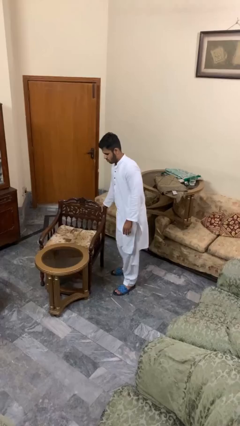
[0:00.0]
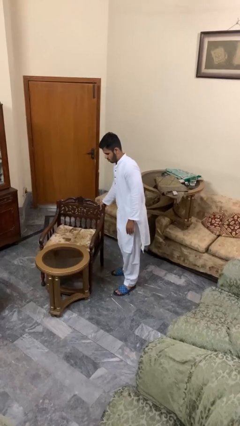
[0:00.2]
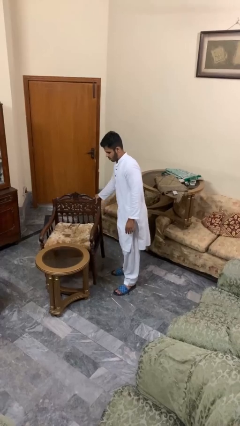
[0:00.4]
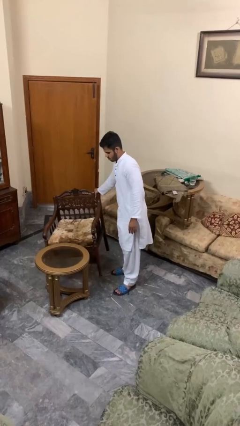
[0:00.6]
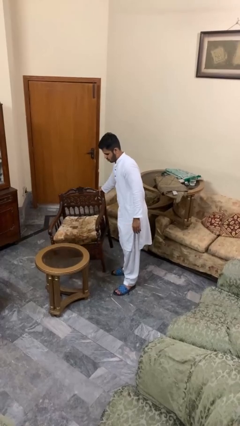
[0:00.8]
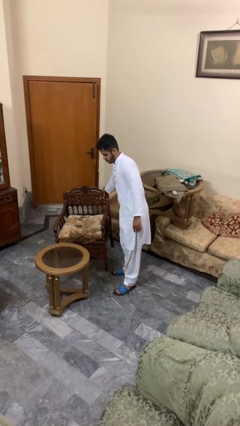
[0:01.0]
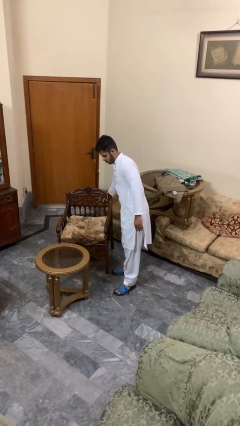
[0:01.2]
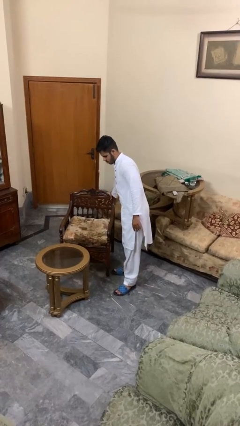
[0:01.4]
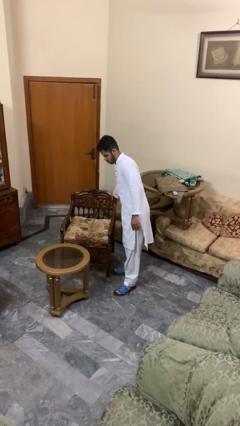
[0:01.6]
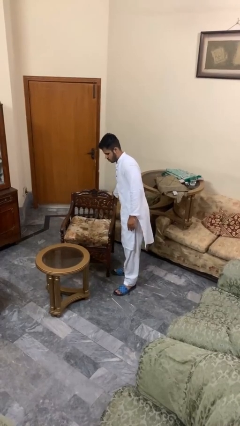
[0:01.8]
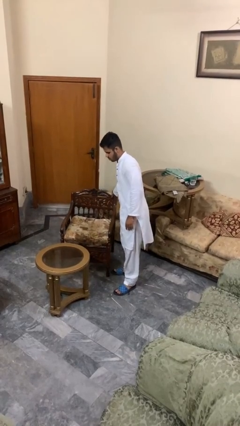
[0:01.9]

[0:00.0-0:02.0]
person pulls out chair

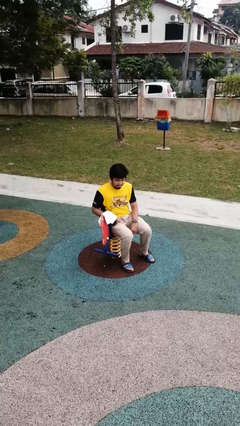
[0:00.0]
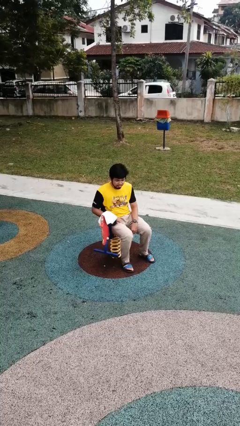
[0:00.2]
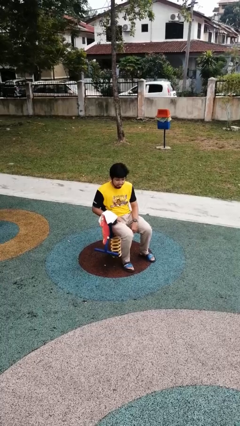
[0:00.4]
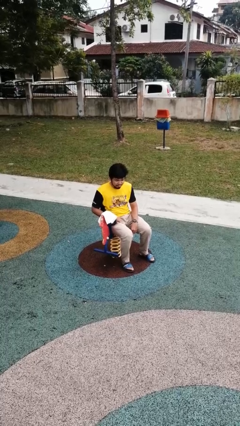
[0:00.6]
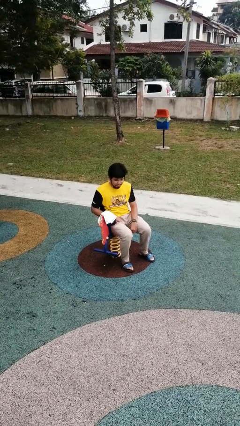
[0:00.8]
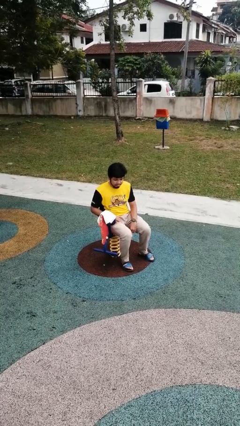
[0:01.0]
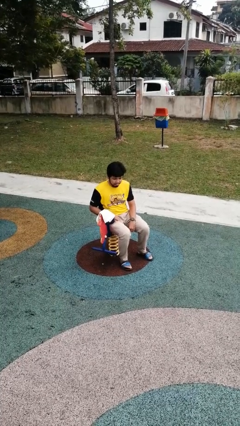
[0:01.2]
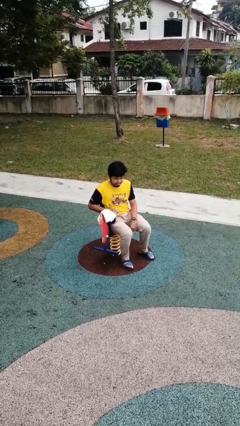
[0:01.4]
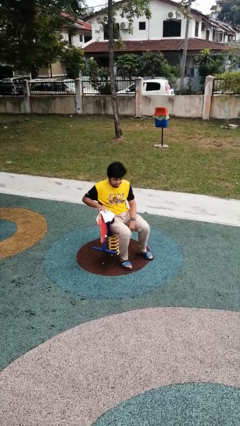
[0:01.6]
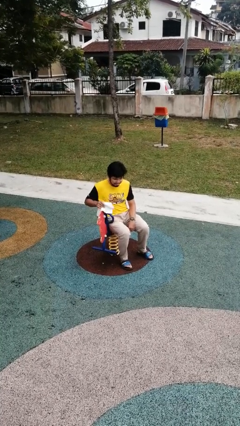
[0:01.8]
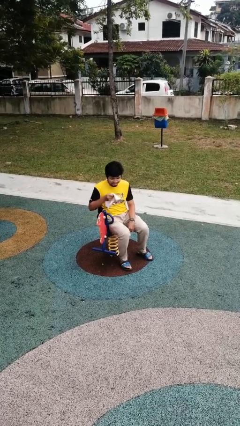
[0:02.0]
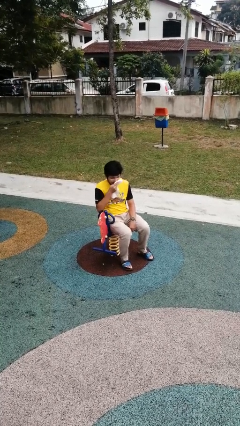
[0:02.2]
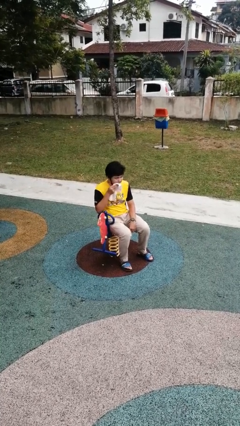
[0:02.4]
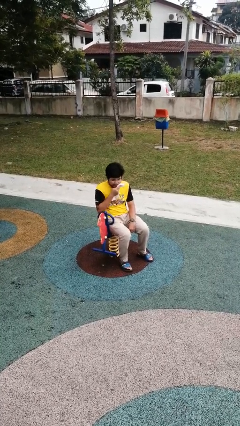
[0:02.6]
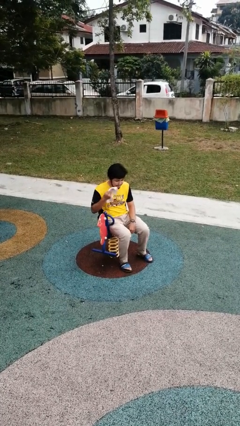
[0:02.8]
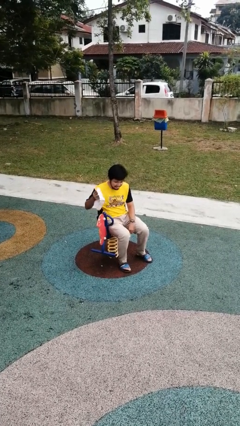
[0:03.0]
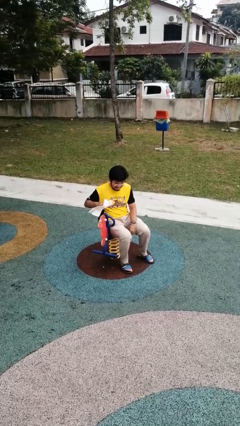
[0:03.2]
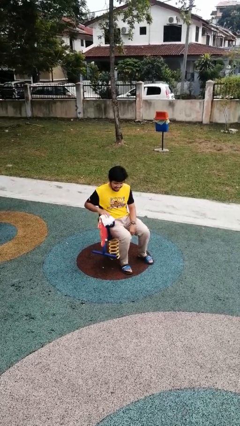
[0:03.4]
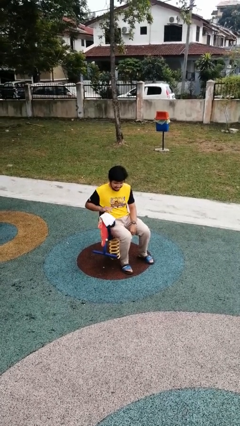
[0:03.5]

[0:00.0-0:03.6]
person wipes mouth with napkin

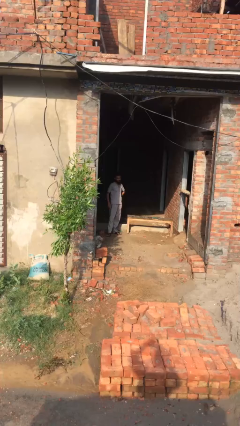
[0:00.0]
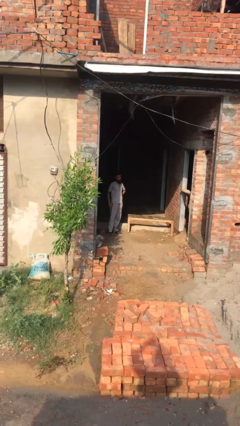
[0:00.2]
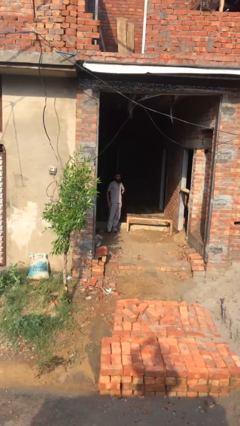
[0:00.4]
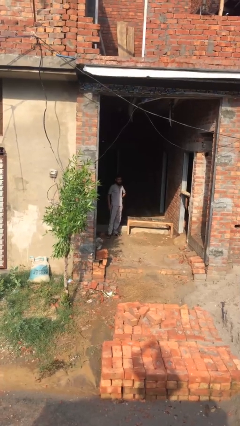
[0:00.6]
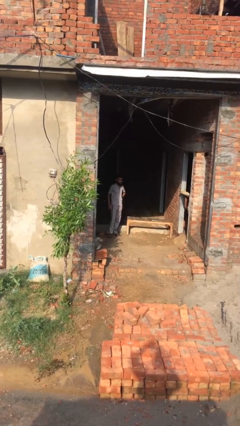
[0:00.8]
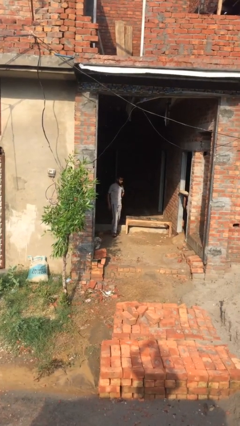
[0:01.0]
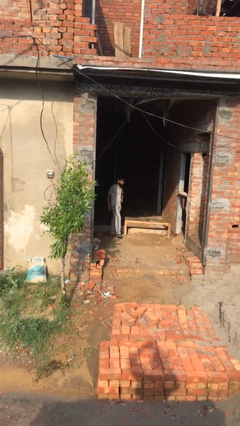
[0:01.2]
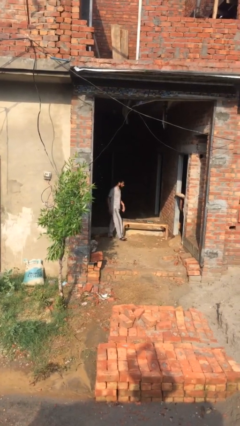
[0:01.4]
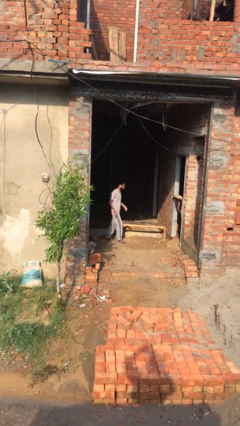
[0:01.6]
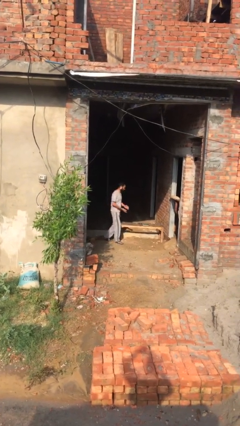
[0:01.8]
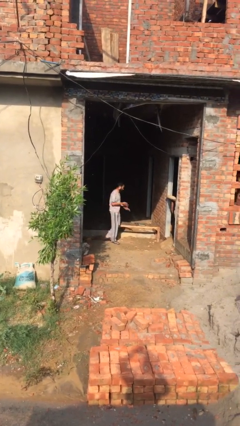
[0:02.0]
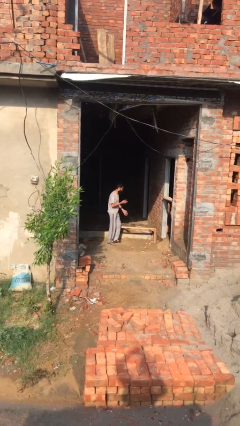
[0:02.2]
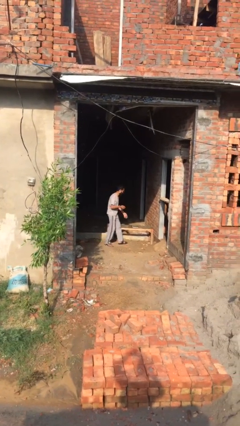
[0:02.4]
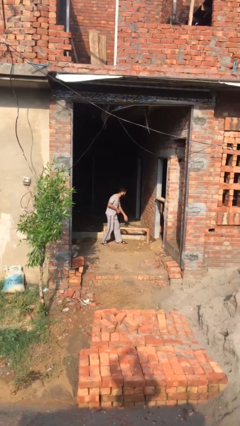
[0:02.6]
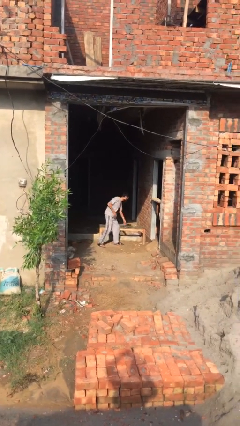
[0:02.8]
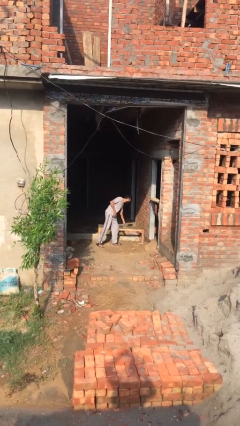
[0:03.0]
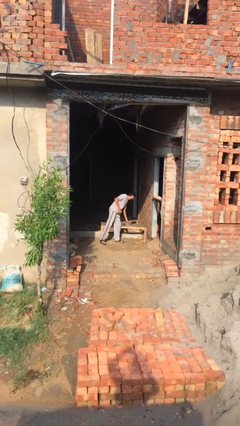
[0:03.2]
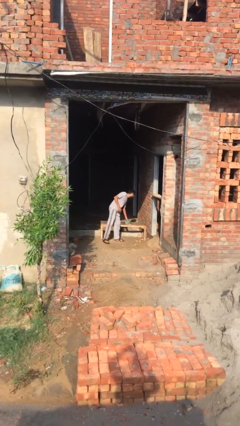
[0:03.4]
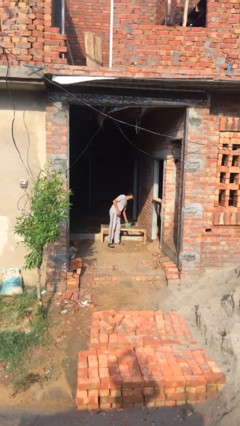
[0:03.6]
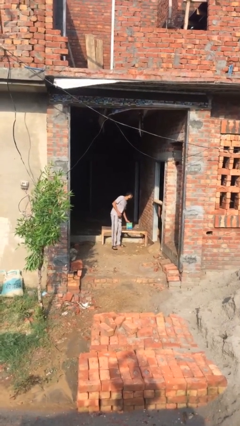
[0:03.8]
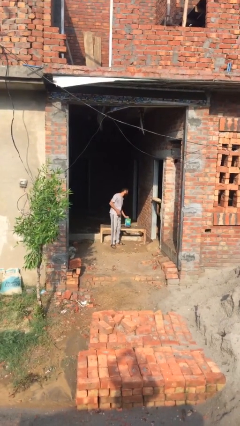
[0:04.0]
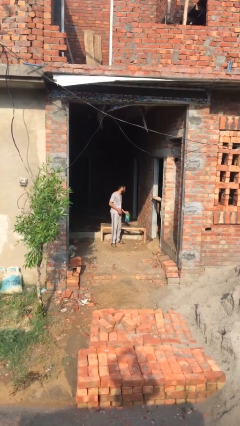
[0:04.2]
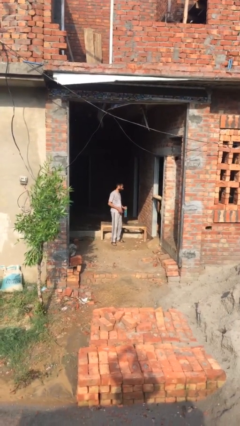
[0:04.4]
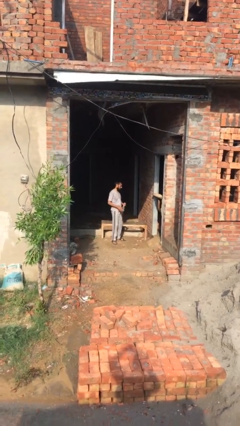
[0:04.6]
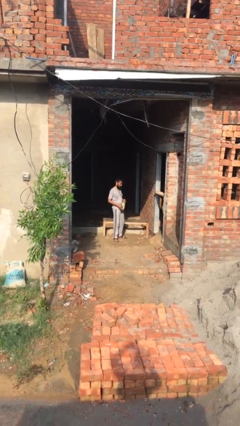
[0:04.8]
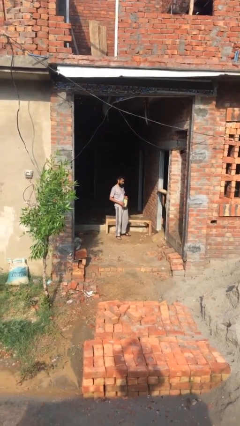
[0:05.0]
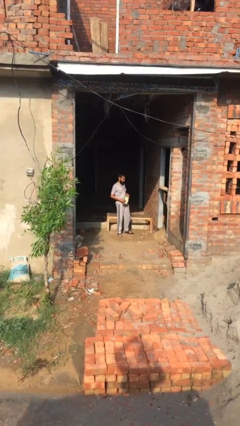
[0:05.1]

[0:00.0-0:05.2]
person picks up object from table

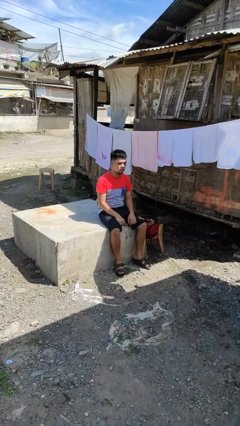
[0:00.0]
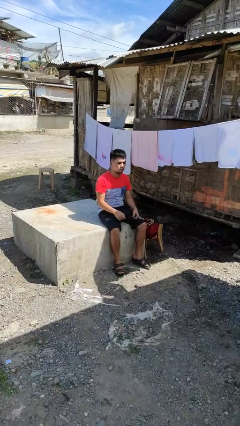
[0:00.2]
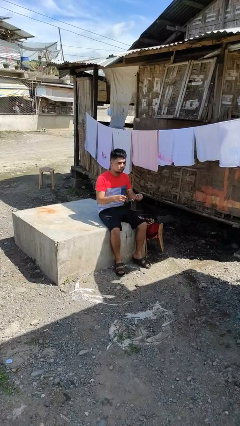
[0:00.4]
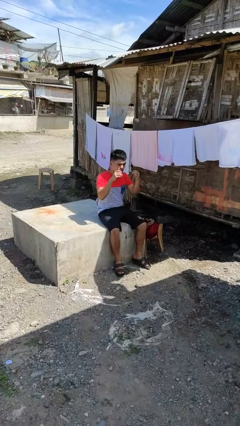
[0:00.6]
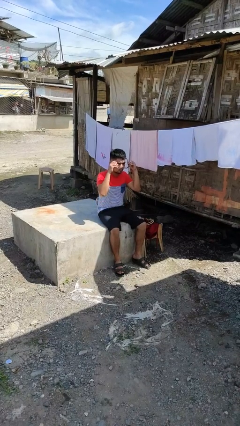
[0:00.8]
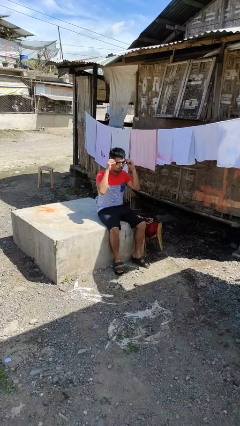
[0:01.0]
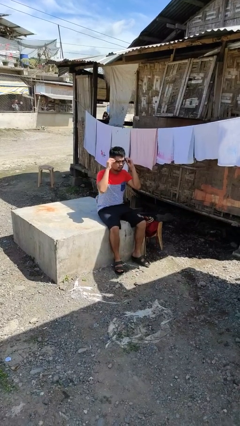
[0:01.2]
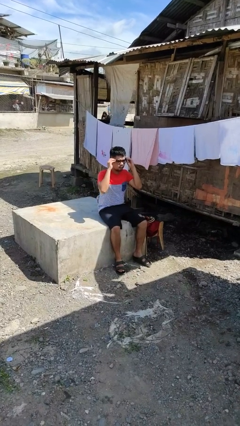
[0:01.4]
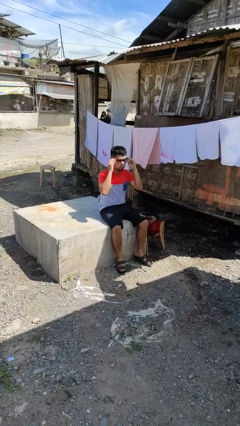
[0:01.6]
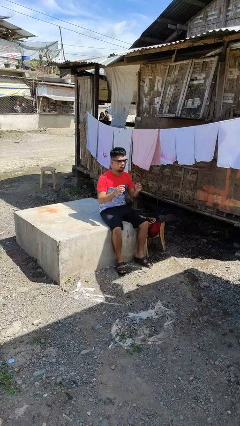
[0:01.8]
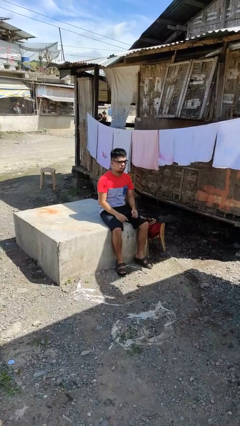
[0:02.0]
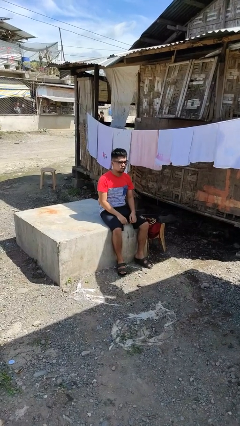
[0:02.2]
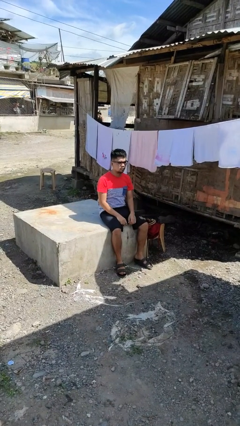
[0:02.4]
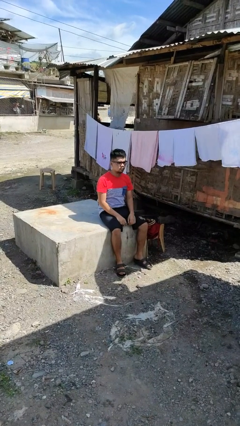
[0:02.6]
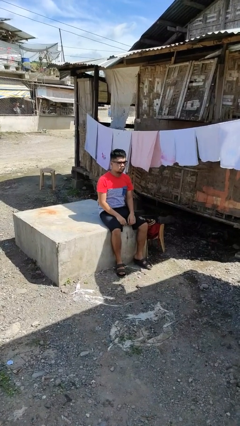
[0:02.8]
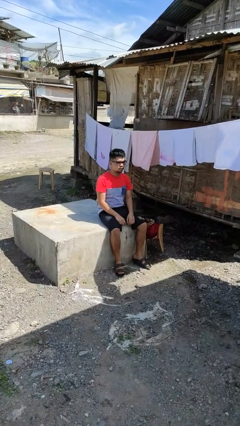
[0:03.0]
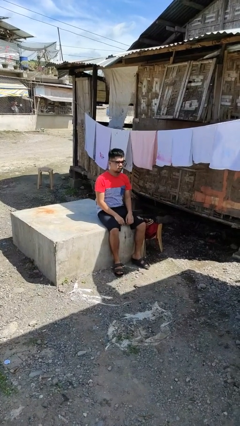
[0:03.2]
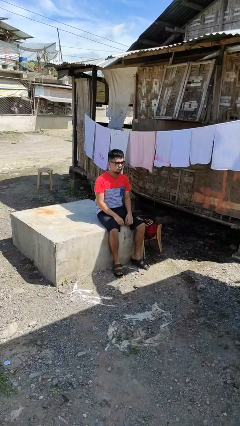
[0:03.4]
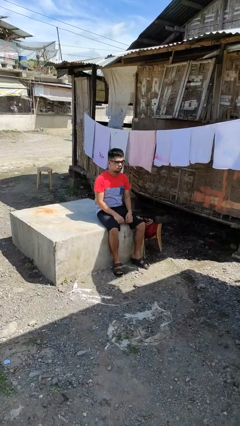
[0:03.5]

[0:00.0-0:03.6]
person puts on glasses

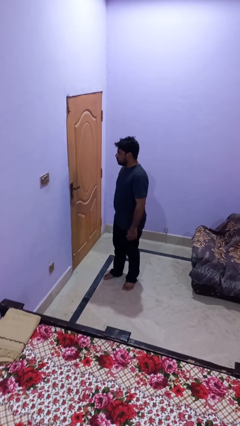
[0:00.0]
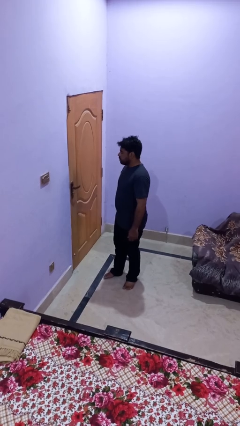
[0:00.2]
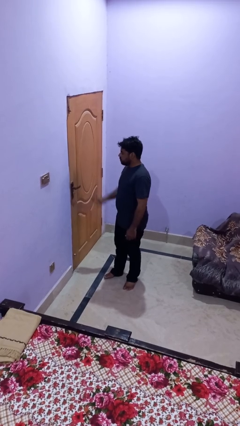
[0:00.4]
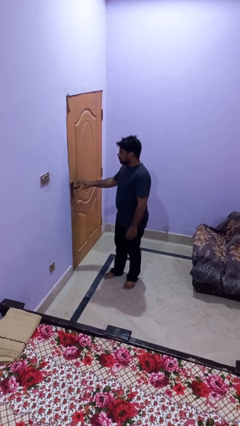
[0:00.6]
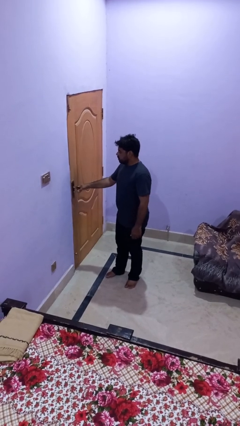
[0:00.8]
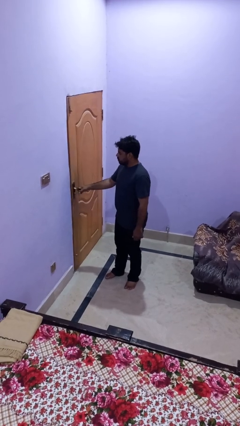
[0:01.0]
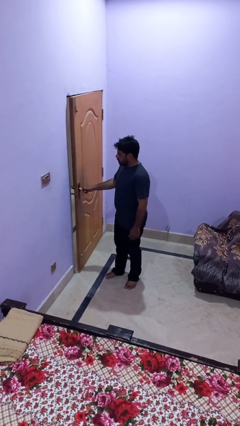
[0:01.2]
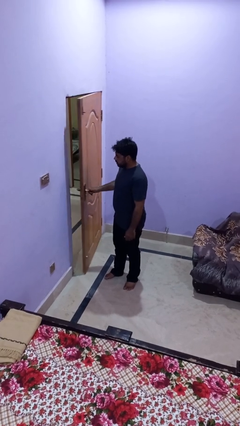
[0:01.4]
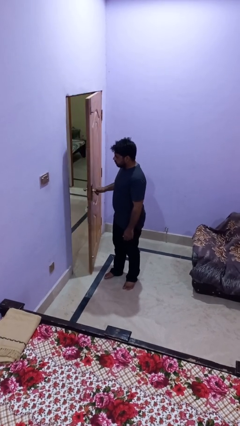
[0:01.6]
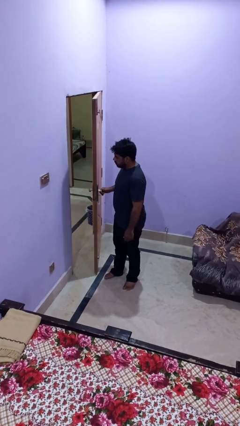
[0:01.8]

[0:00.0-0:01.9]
person opens facility door

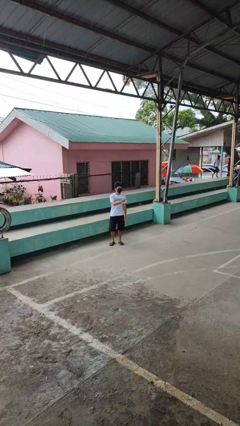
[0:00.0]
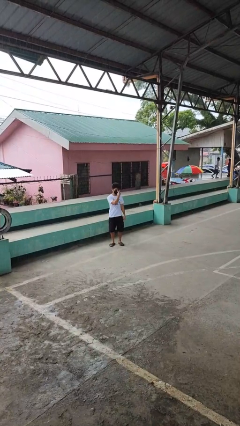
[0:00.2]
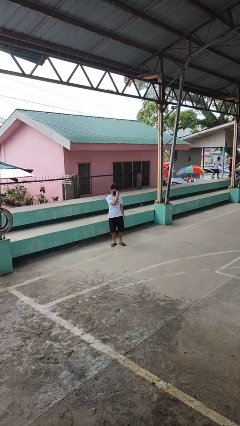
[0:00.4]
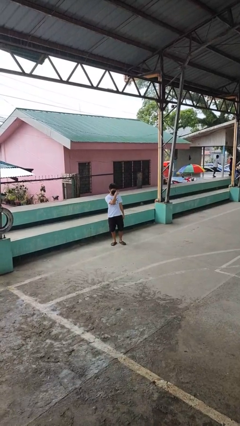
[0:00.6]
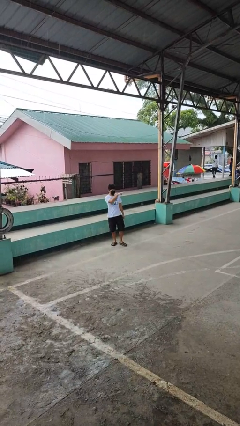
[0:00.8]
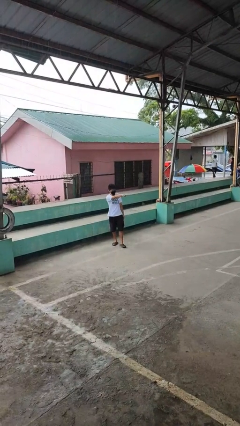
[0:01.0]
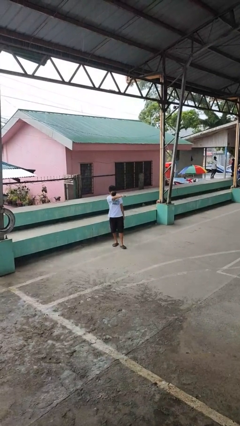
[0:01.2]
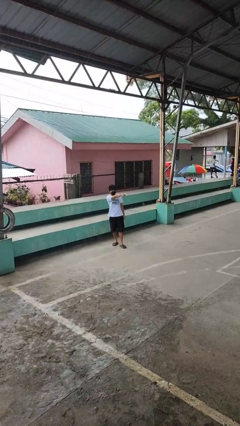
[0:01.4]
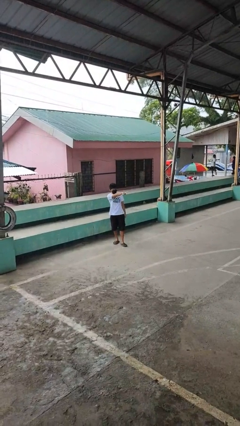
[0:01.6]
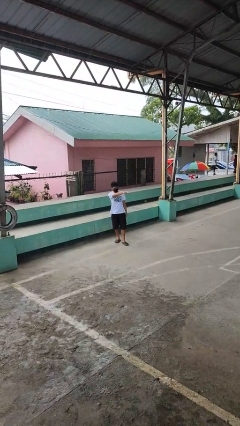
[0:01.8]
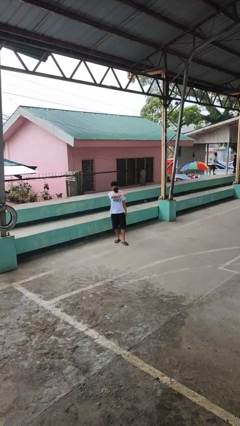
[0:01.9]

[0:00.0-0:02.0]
person gestures watch closely
